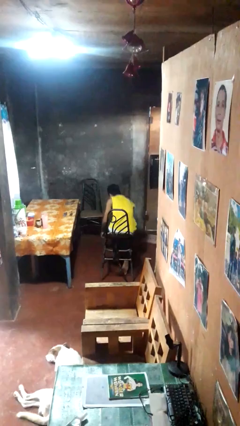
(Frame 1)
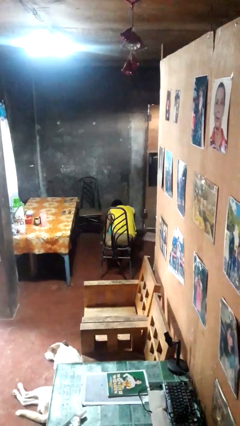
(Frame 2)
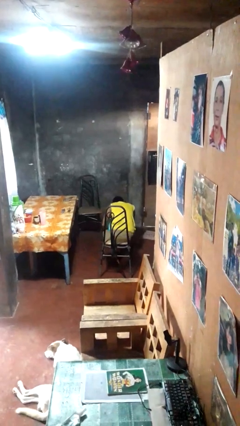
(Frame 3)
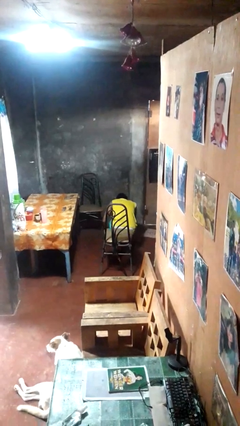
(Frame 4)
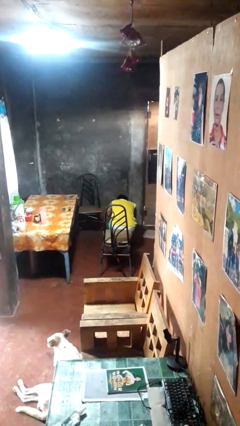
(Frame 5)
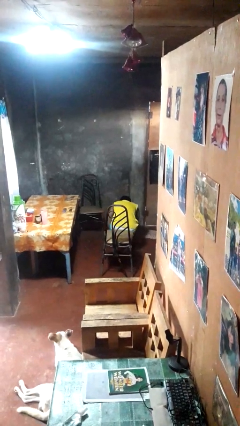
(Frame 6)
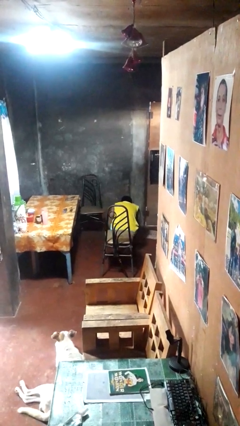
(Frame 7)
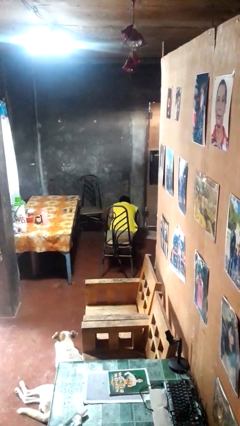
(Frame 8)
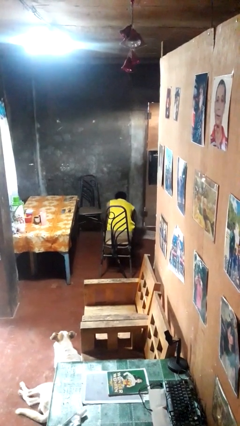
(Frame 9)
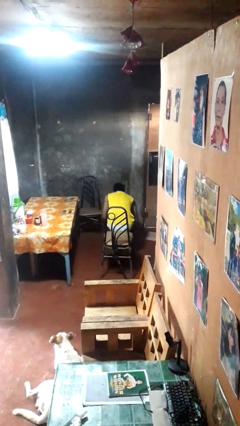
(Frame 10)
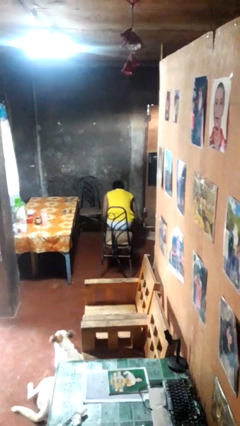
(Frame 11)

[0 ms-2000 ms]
person falls from chair

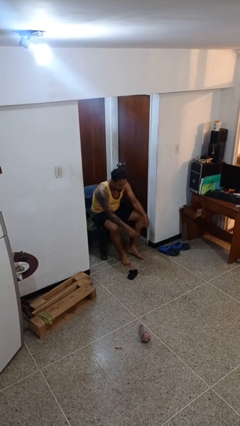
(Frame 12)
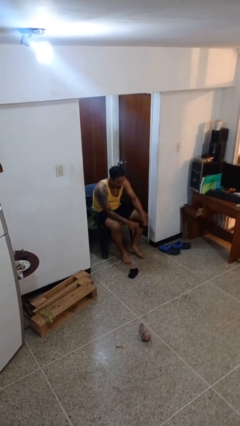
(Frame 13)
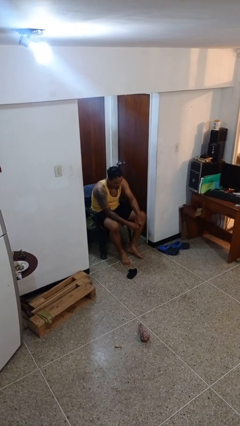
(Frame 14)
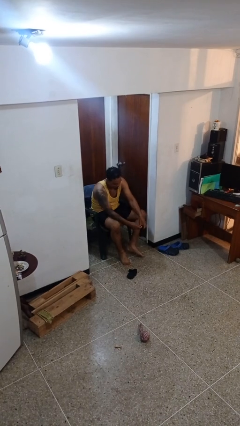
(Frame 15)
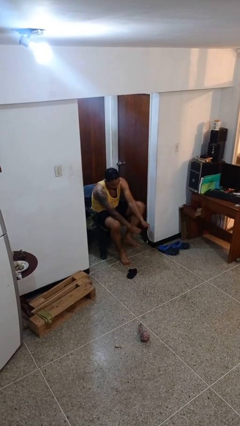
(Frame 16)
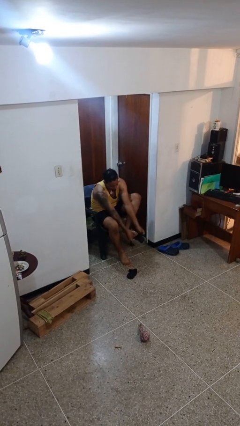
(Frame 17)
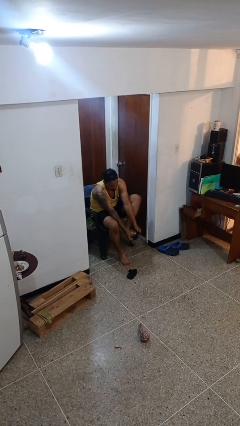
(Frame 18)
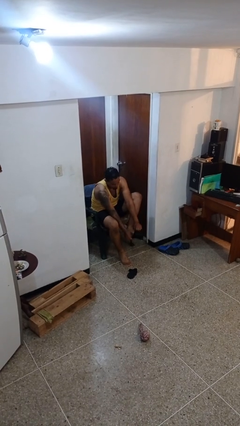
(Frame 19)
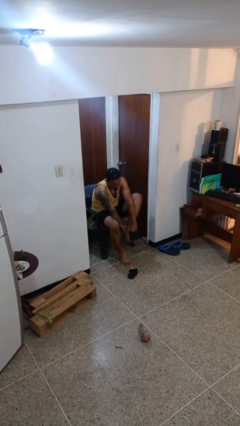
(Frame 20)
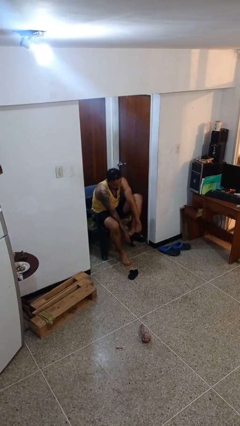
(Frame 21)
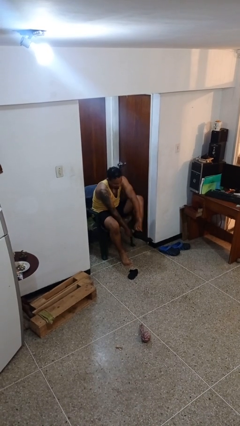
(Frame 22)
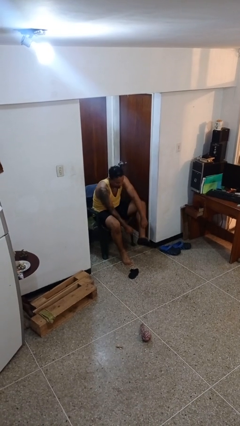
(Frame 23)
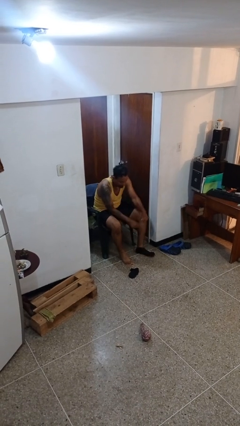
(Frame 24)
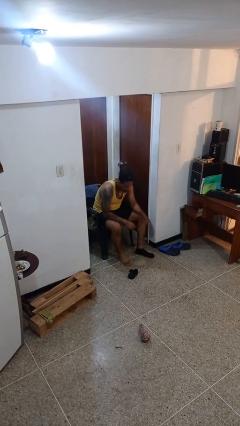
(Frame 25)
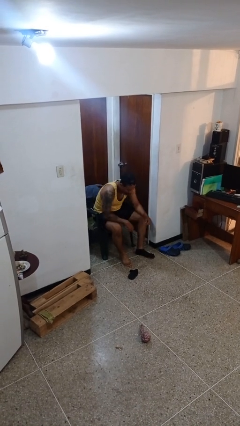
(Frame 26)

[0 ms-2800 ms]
person puts on socks

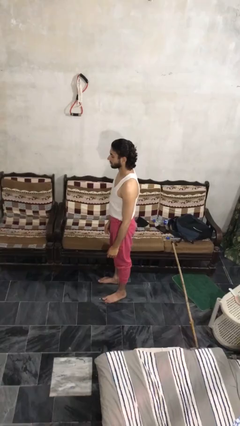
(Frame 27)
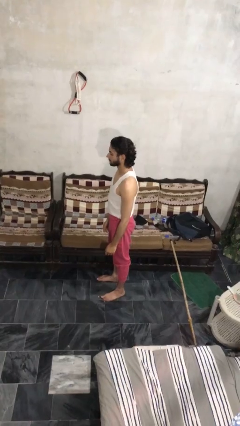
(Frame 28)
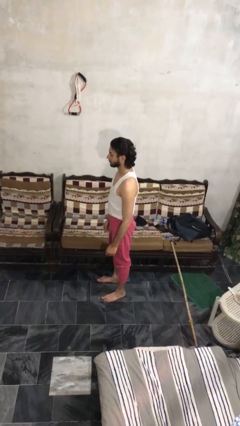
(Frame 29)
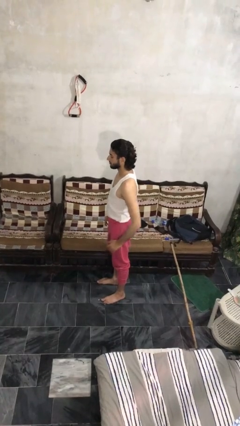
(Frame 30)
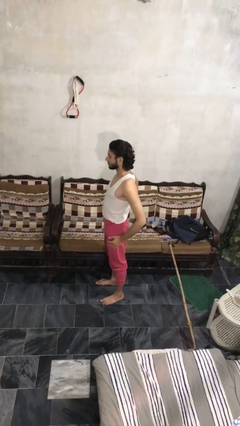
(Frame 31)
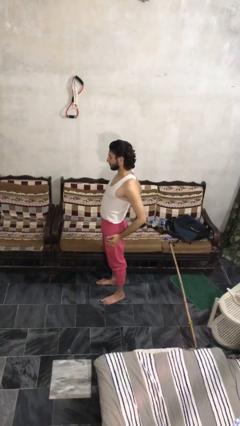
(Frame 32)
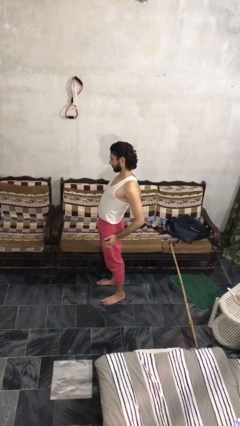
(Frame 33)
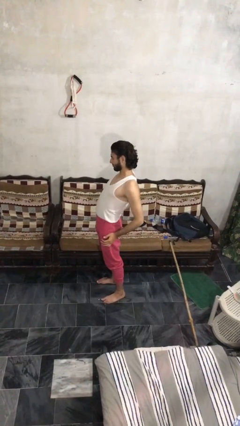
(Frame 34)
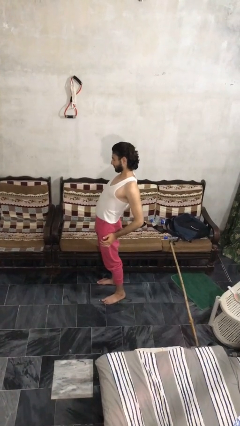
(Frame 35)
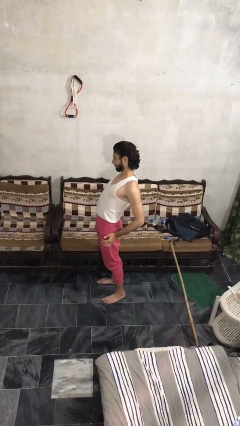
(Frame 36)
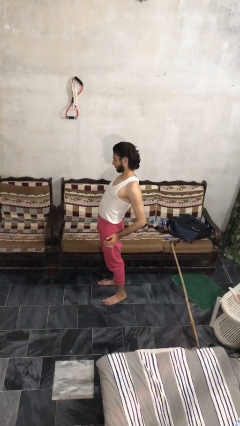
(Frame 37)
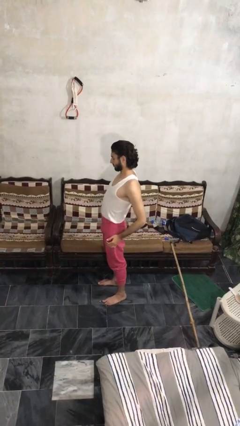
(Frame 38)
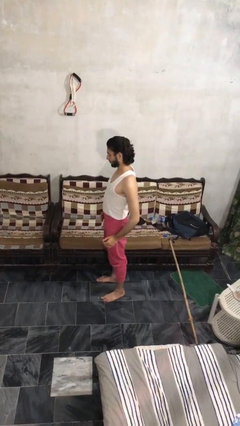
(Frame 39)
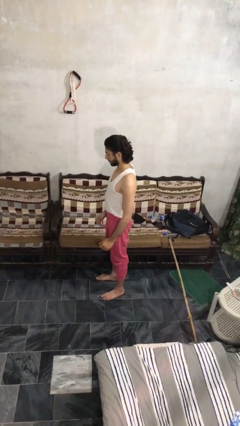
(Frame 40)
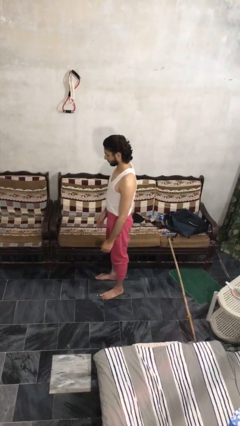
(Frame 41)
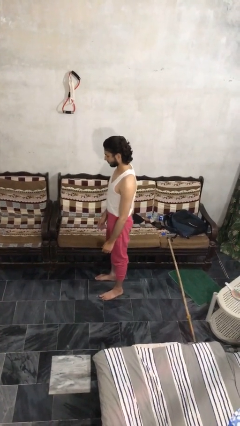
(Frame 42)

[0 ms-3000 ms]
person stretches back

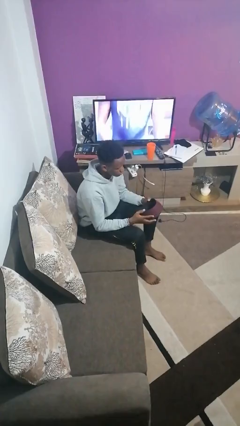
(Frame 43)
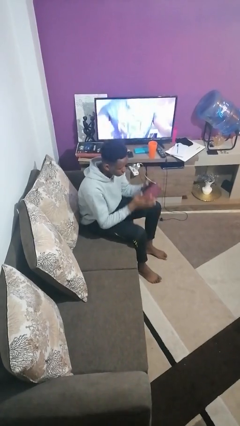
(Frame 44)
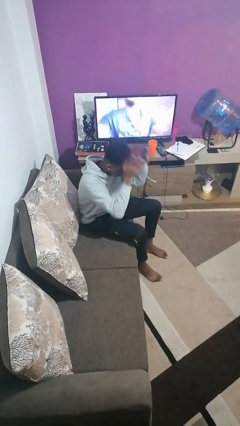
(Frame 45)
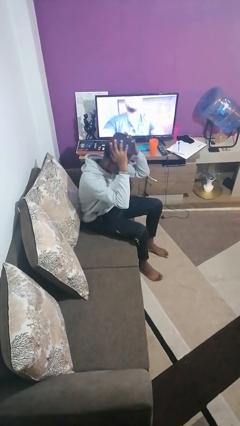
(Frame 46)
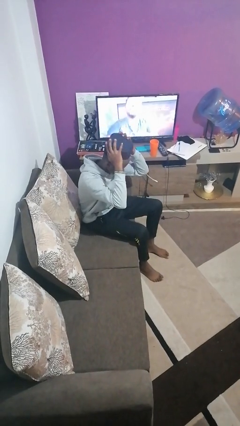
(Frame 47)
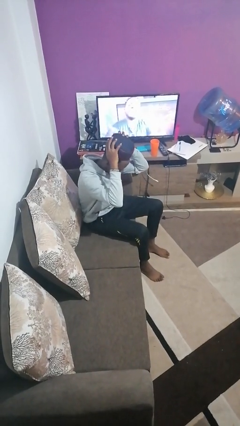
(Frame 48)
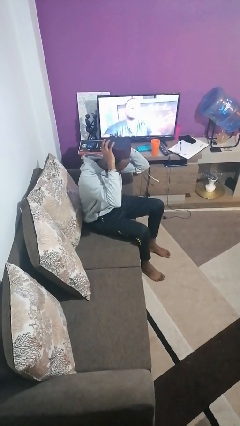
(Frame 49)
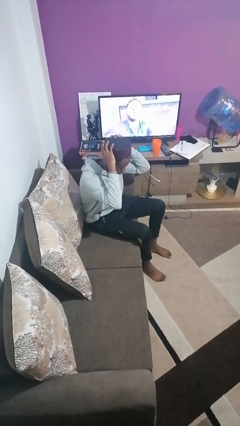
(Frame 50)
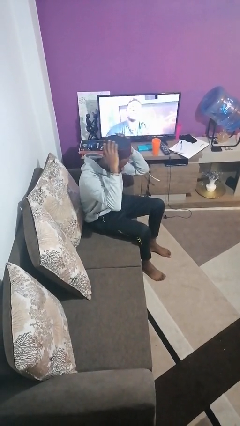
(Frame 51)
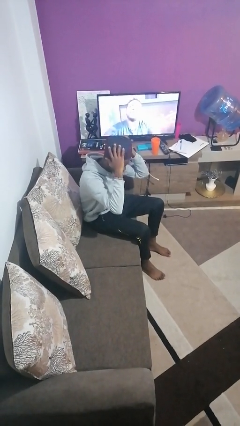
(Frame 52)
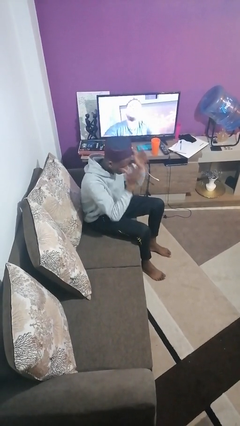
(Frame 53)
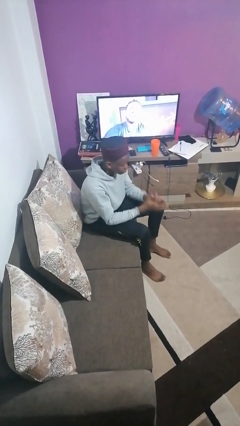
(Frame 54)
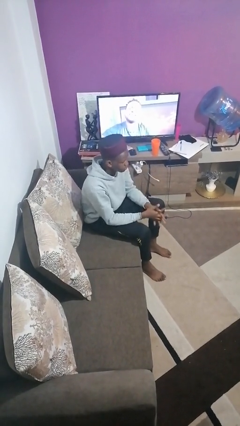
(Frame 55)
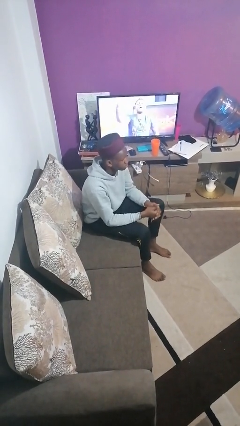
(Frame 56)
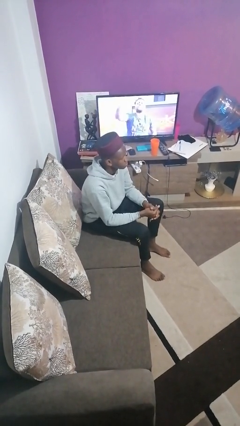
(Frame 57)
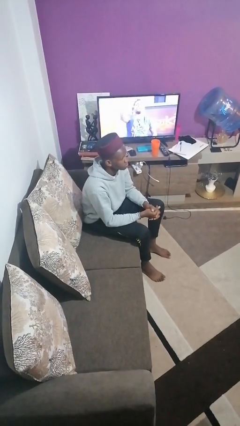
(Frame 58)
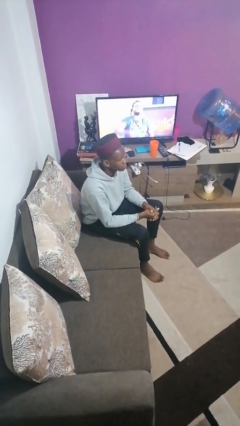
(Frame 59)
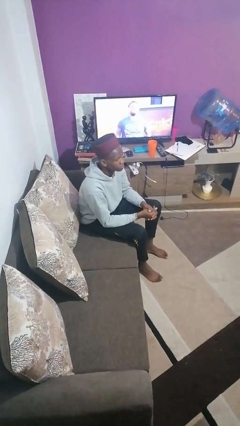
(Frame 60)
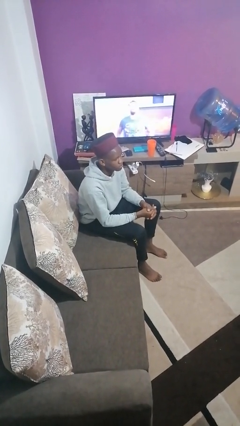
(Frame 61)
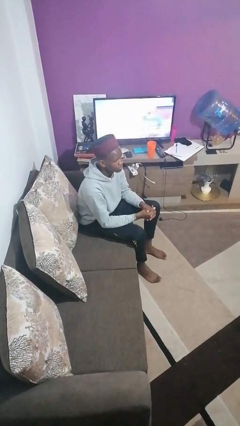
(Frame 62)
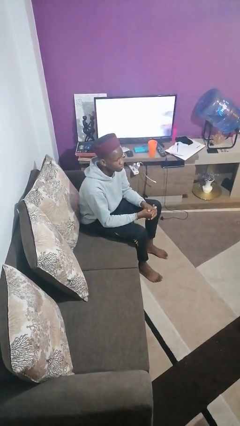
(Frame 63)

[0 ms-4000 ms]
person puts on hat

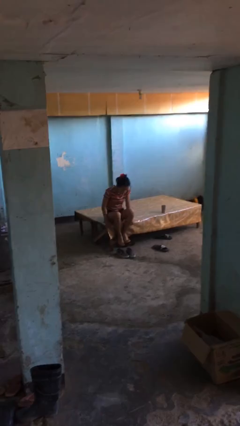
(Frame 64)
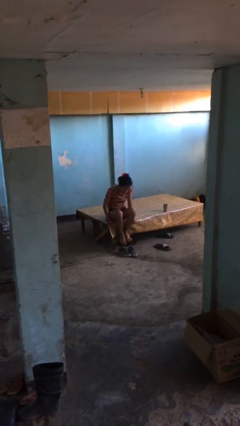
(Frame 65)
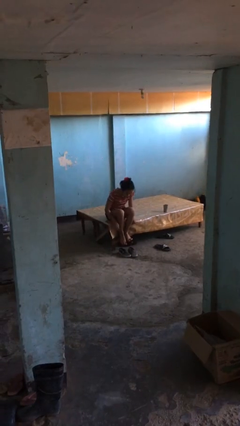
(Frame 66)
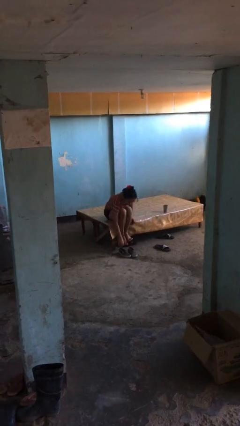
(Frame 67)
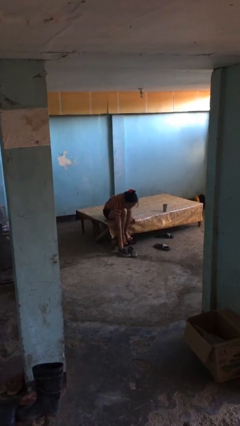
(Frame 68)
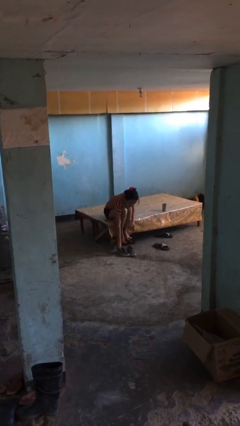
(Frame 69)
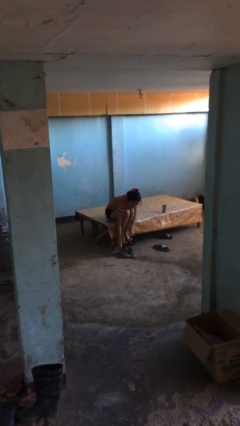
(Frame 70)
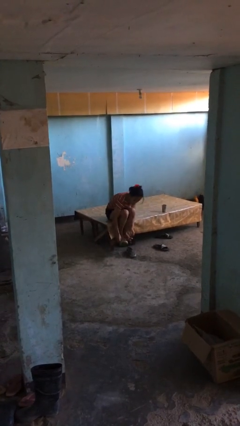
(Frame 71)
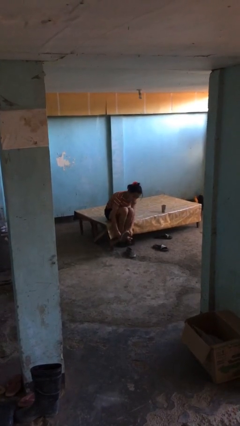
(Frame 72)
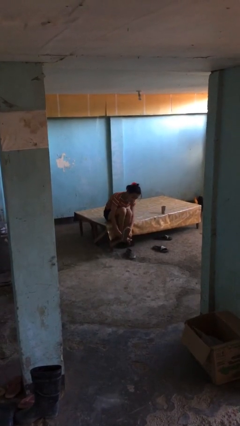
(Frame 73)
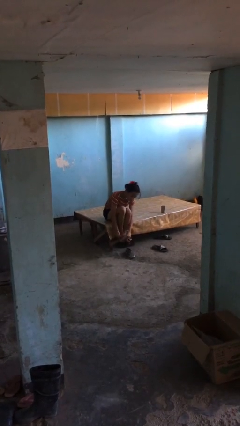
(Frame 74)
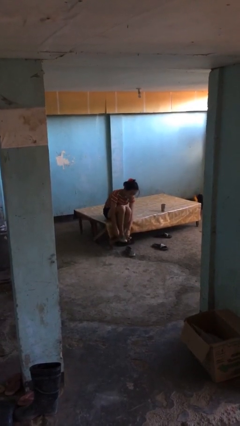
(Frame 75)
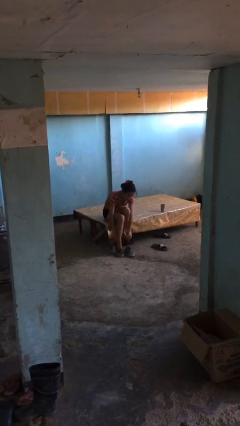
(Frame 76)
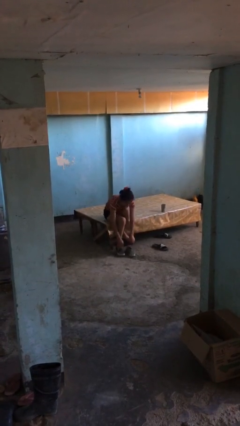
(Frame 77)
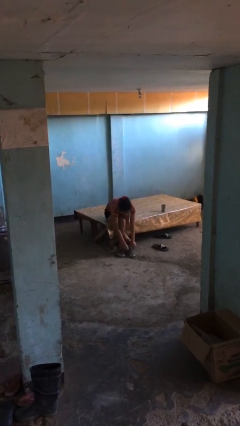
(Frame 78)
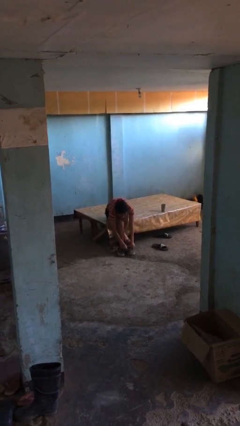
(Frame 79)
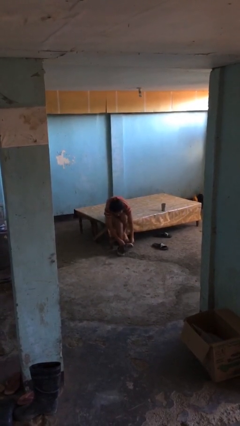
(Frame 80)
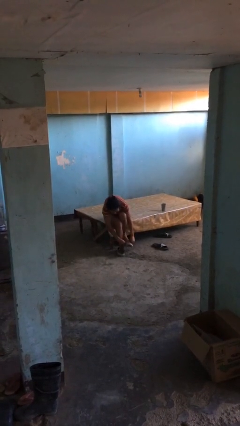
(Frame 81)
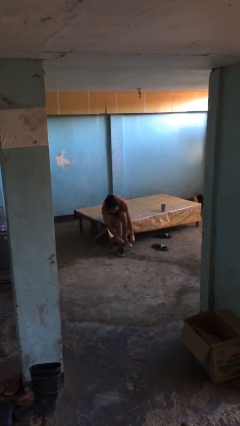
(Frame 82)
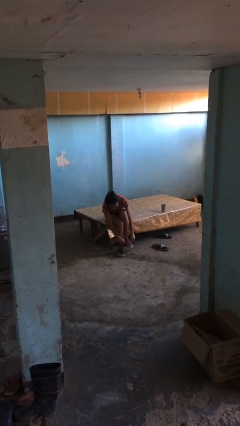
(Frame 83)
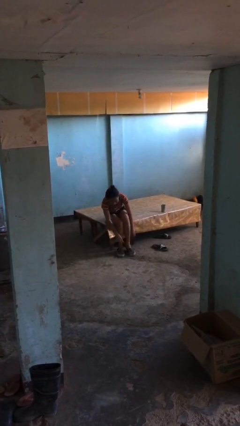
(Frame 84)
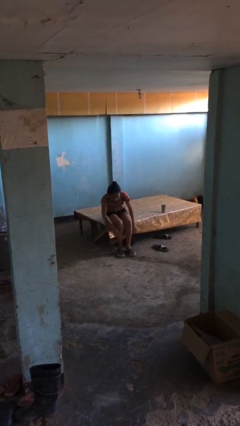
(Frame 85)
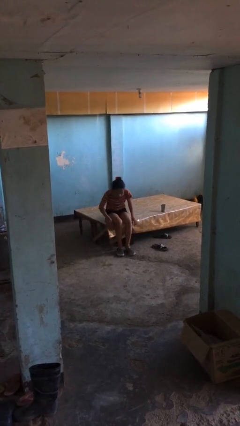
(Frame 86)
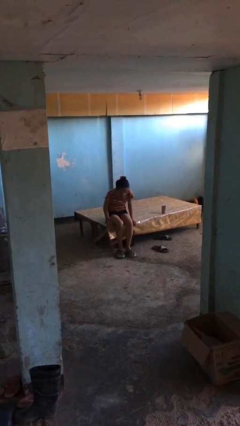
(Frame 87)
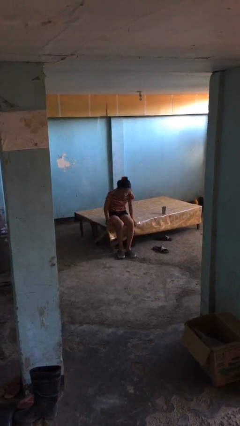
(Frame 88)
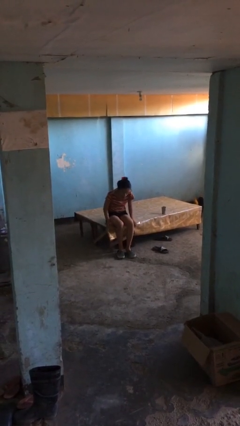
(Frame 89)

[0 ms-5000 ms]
person puts on shoes

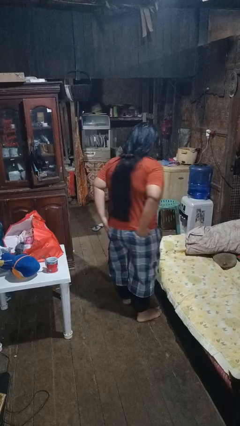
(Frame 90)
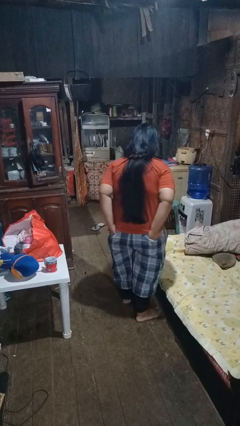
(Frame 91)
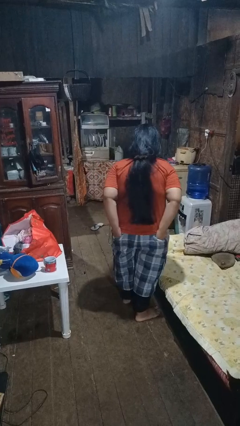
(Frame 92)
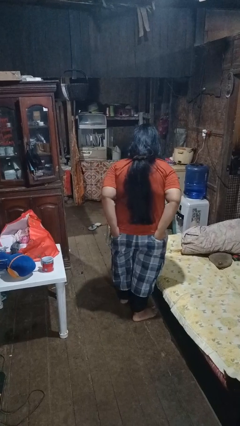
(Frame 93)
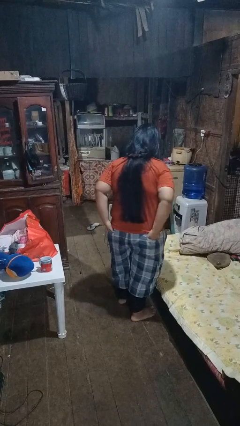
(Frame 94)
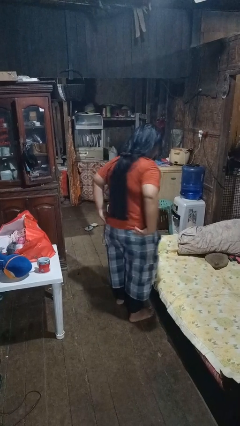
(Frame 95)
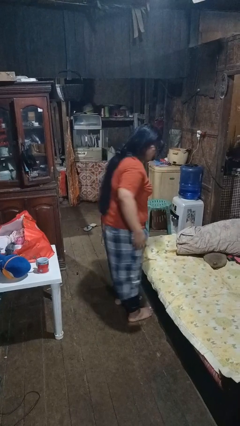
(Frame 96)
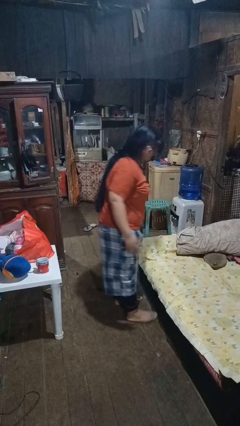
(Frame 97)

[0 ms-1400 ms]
person puts hands in back pockets
